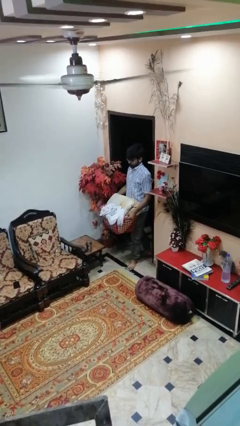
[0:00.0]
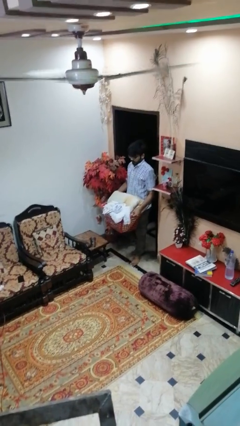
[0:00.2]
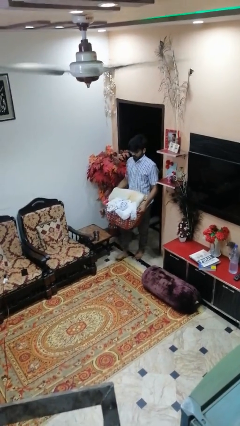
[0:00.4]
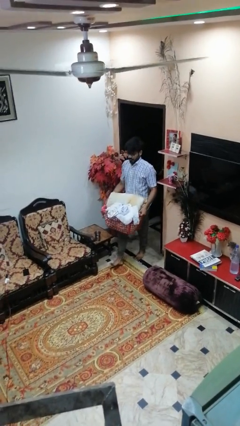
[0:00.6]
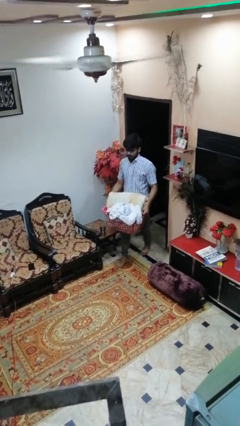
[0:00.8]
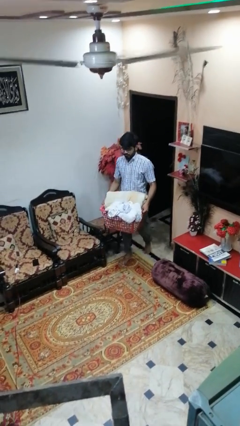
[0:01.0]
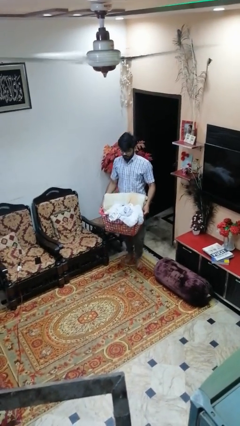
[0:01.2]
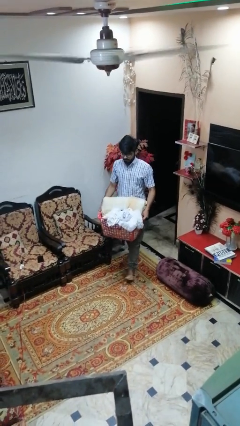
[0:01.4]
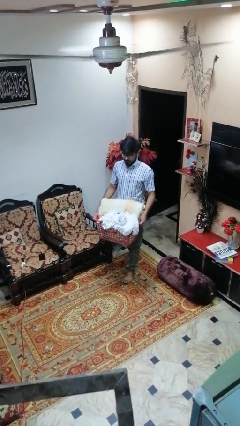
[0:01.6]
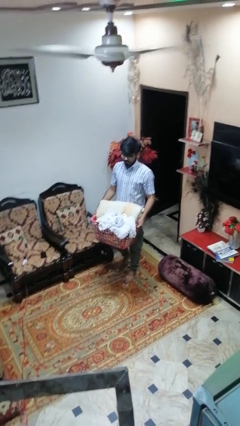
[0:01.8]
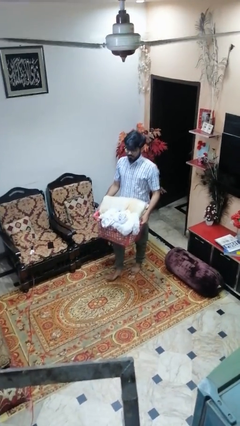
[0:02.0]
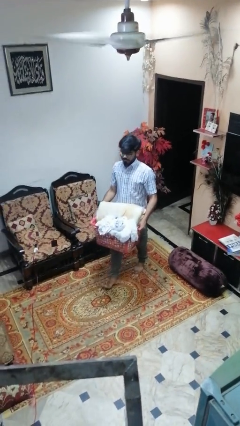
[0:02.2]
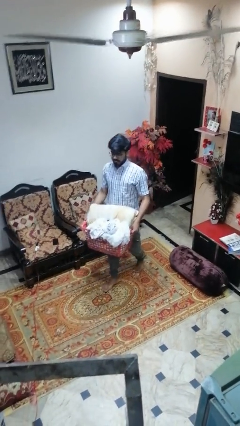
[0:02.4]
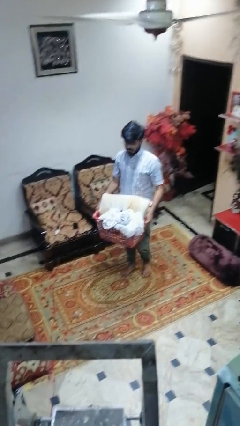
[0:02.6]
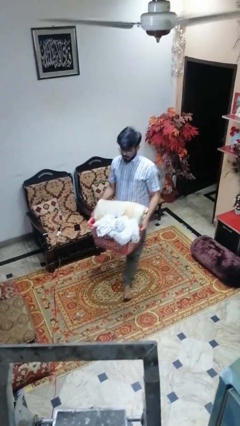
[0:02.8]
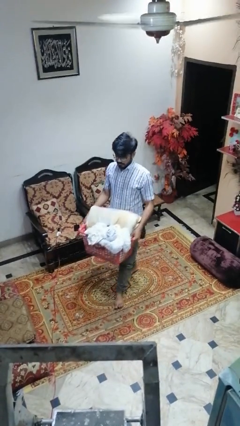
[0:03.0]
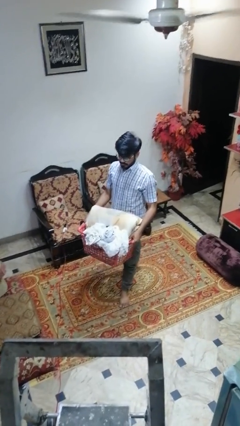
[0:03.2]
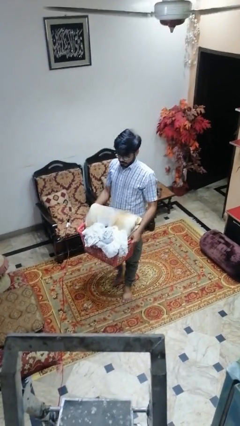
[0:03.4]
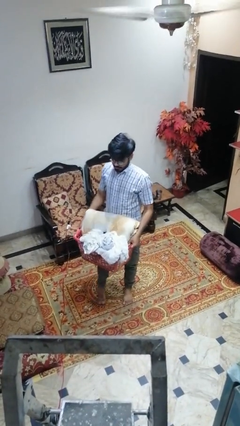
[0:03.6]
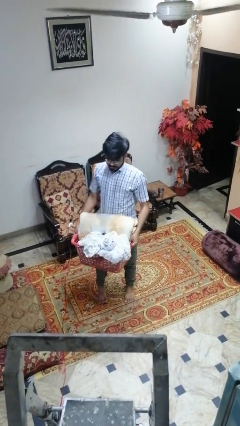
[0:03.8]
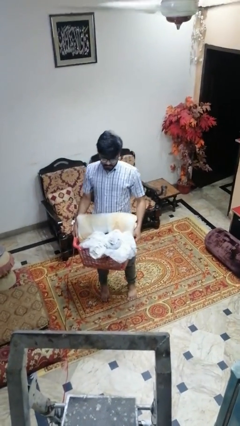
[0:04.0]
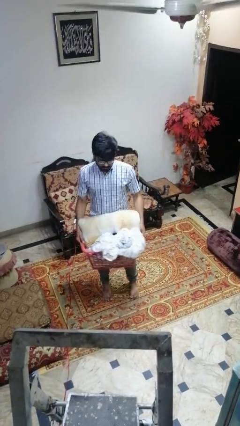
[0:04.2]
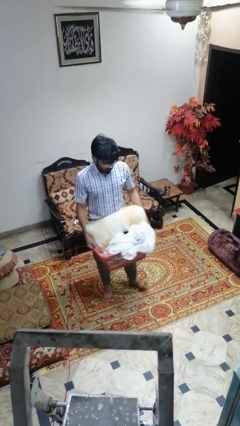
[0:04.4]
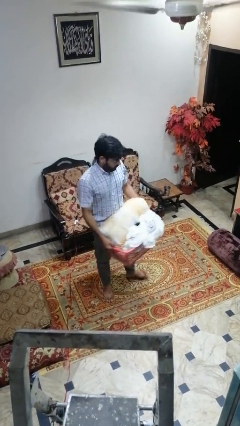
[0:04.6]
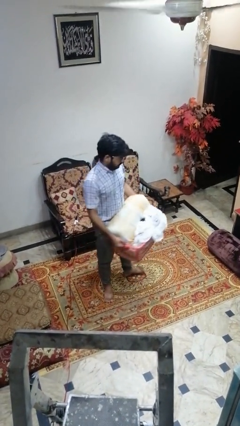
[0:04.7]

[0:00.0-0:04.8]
person carries laundry basket

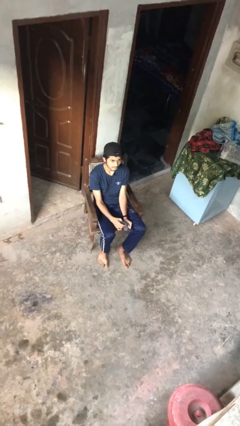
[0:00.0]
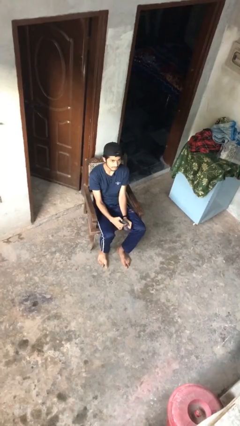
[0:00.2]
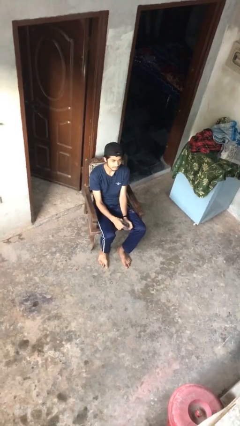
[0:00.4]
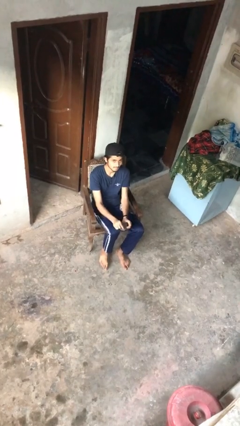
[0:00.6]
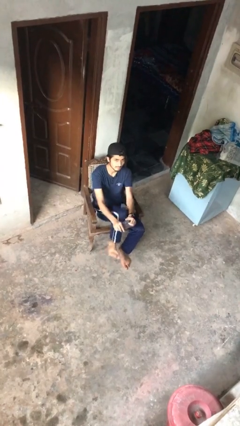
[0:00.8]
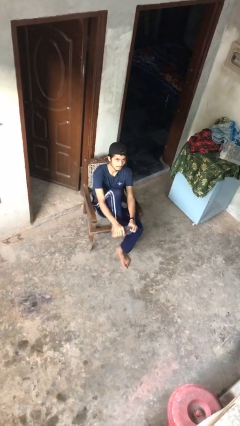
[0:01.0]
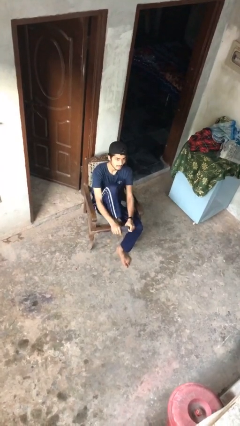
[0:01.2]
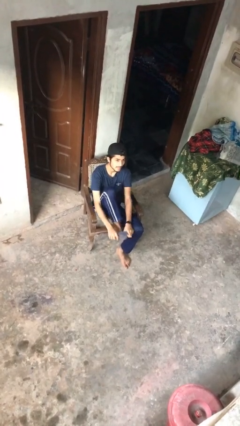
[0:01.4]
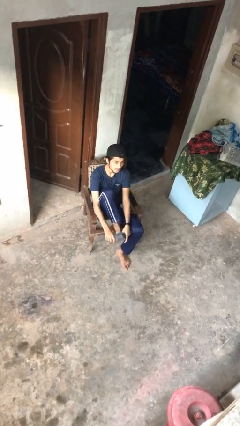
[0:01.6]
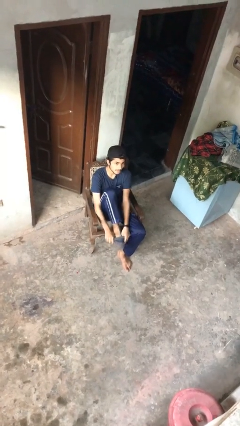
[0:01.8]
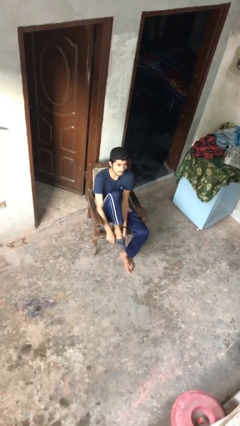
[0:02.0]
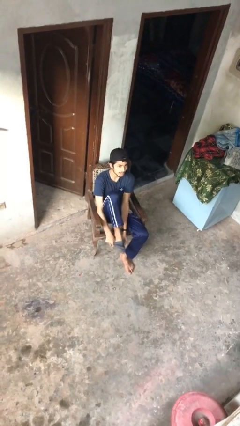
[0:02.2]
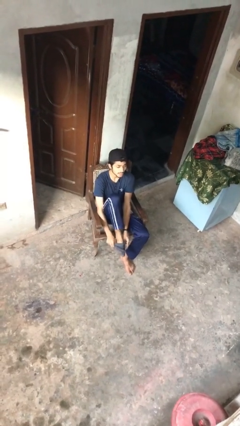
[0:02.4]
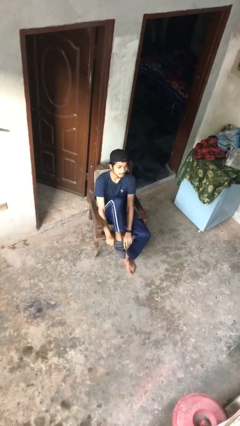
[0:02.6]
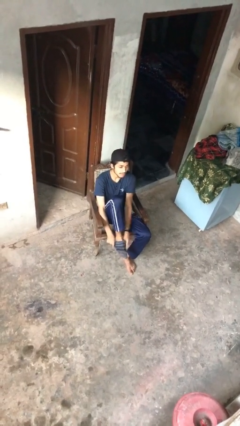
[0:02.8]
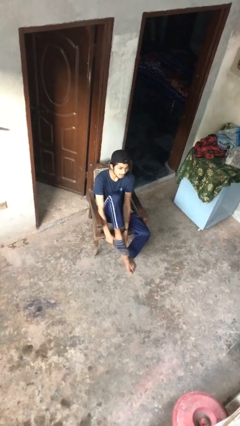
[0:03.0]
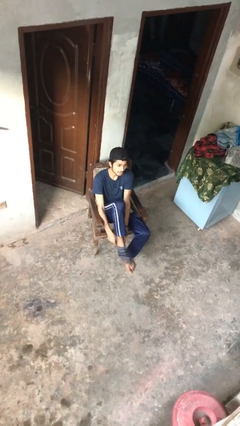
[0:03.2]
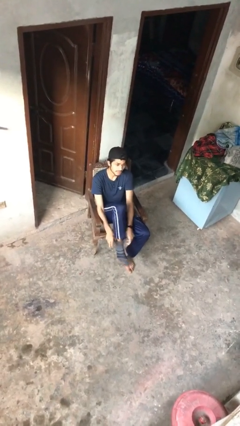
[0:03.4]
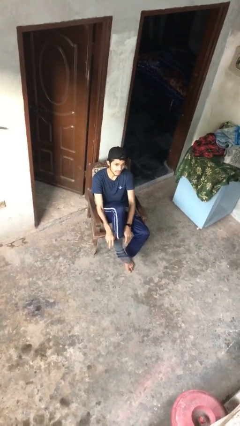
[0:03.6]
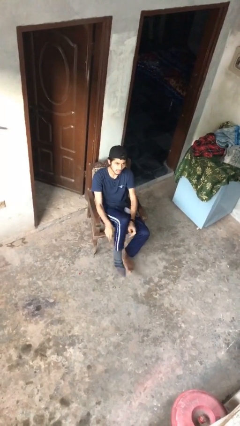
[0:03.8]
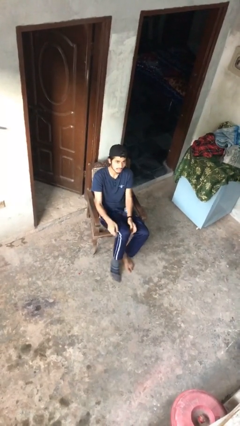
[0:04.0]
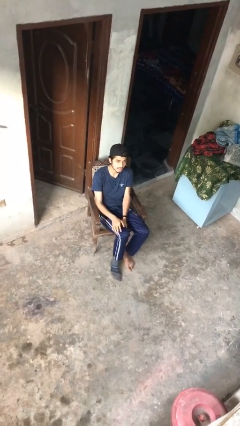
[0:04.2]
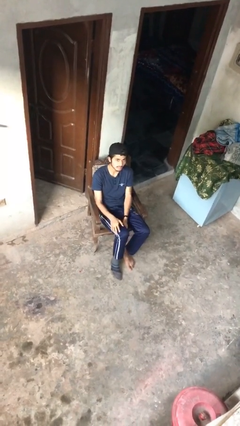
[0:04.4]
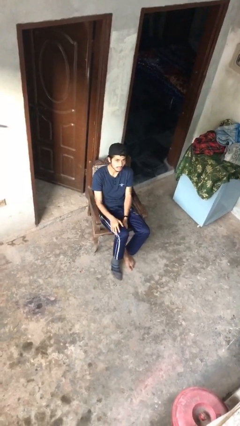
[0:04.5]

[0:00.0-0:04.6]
person puts on socks

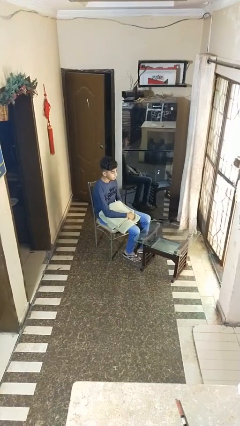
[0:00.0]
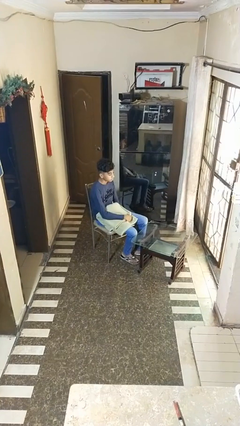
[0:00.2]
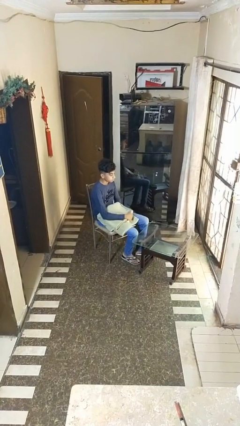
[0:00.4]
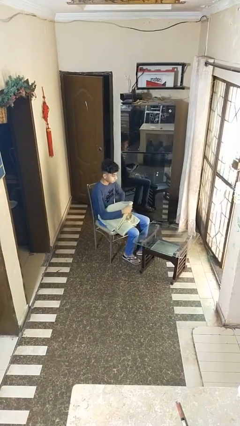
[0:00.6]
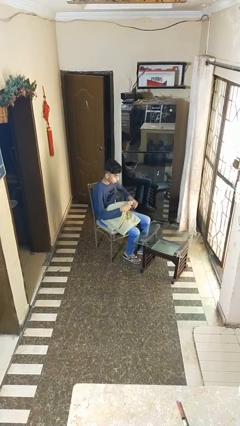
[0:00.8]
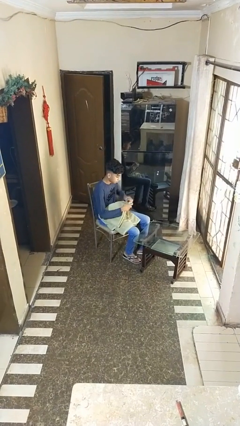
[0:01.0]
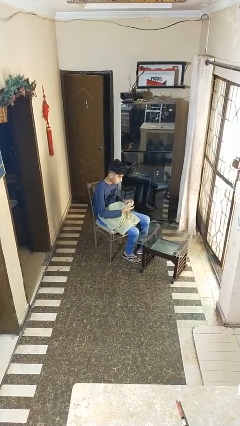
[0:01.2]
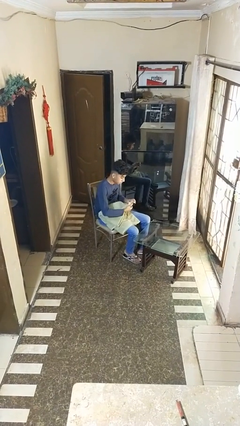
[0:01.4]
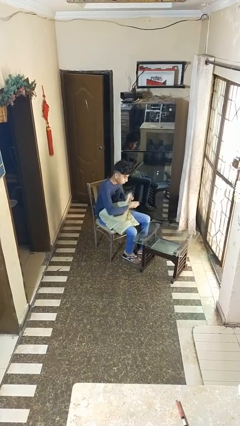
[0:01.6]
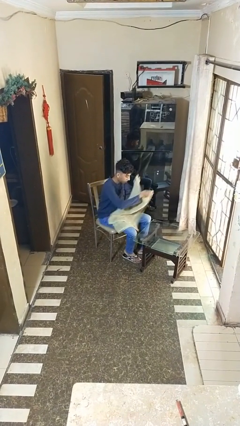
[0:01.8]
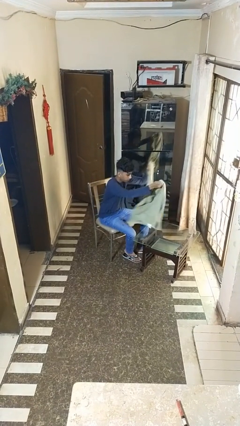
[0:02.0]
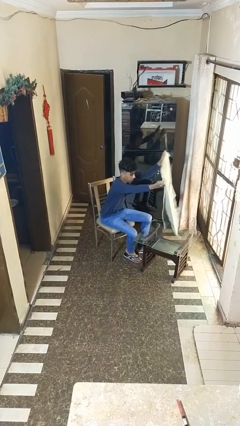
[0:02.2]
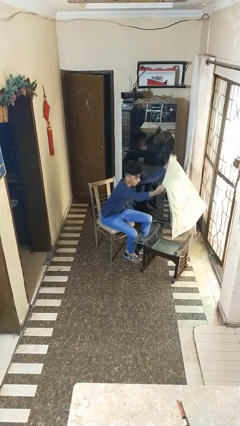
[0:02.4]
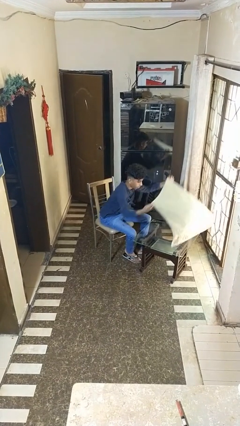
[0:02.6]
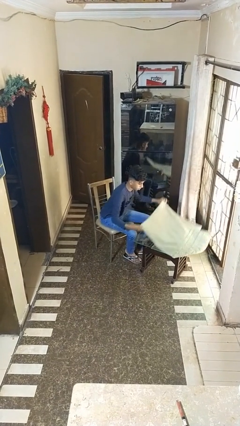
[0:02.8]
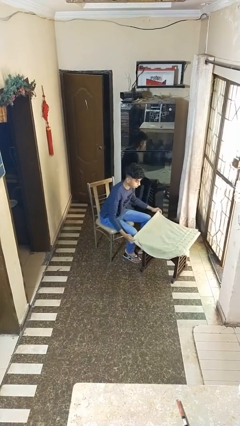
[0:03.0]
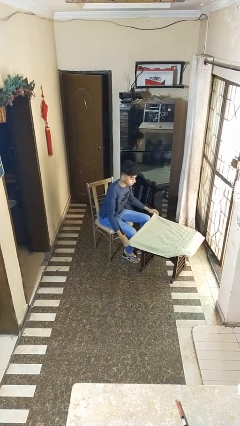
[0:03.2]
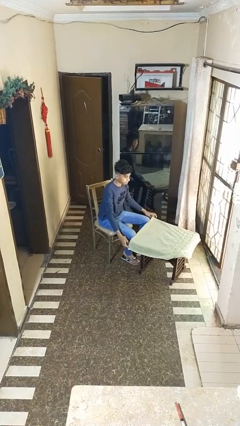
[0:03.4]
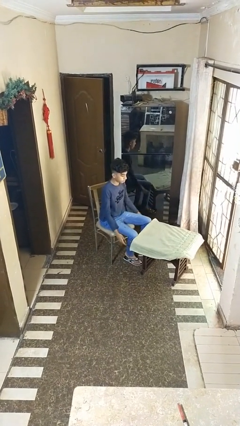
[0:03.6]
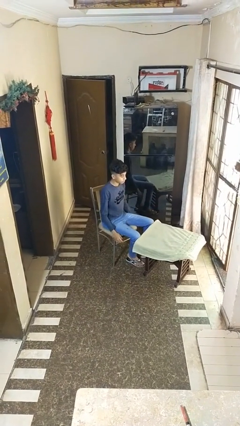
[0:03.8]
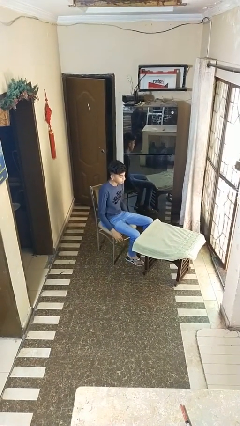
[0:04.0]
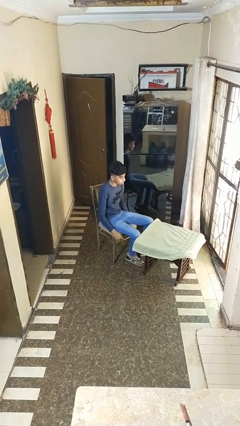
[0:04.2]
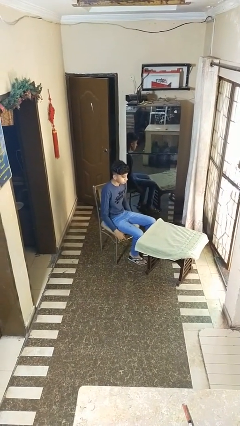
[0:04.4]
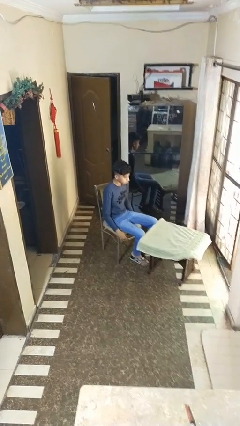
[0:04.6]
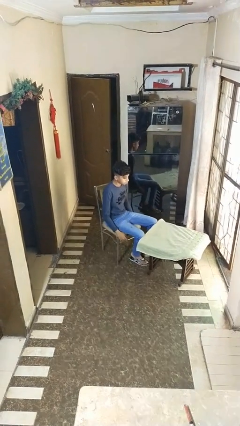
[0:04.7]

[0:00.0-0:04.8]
person spreads tablecloth

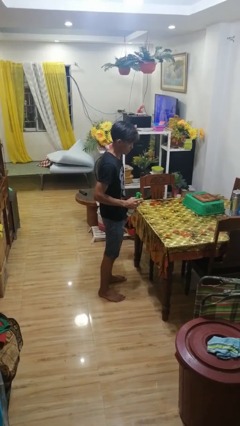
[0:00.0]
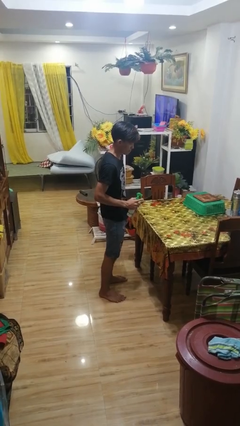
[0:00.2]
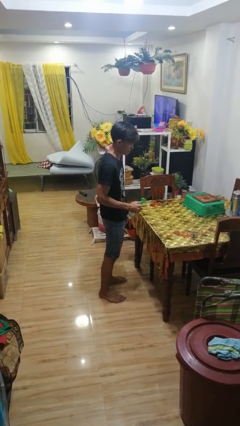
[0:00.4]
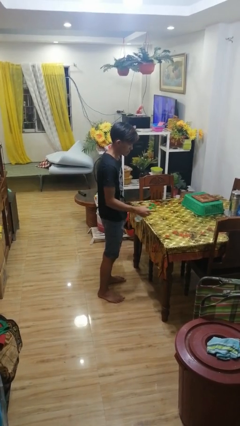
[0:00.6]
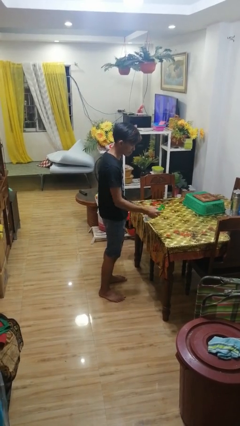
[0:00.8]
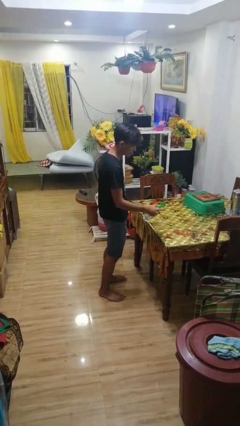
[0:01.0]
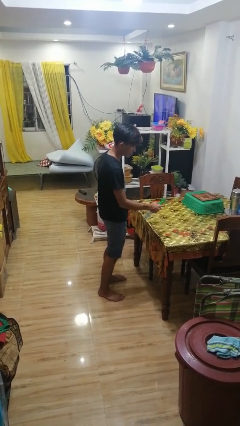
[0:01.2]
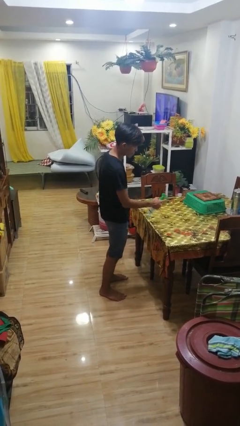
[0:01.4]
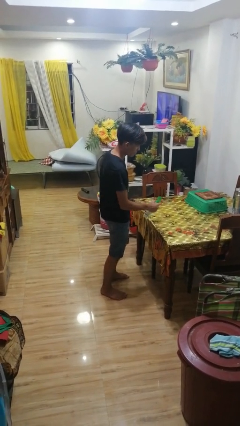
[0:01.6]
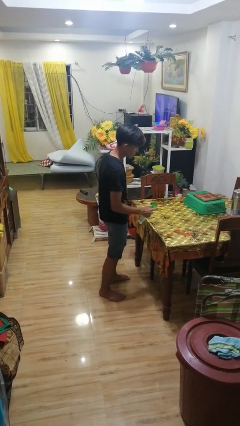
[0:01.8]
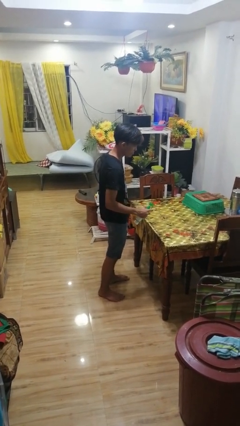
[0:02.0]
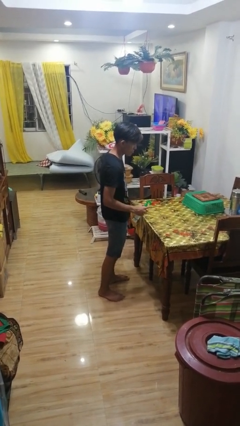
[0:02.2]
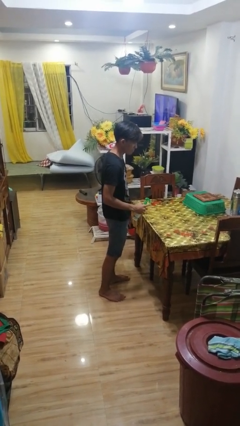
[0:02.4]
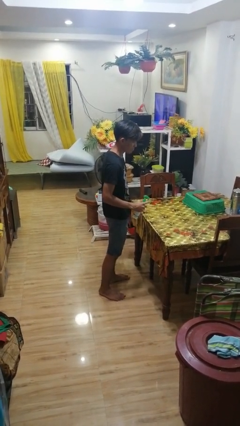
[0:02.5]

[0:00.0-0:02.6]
person sprays from bottle

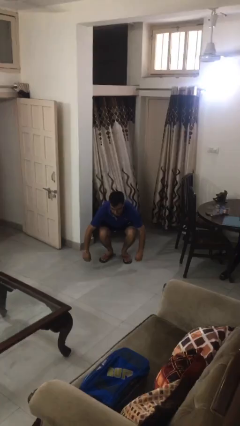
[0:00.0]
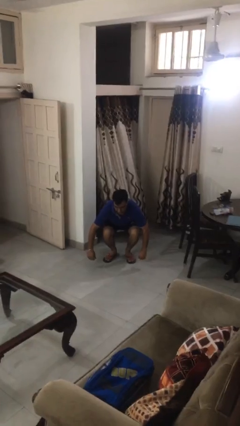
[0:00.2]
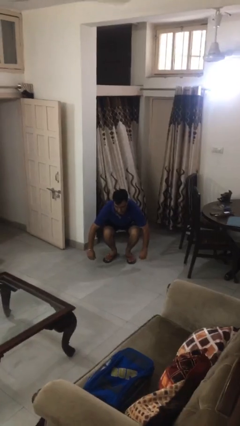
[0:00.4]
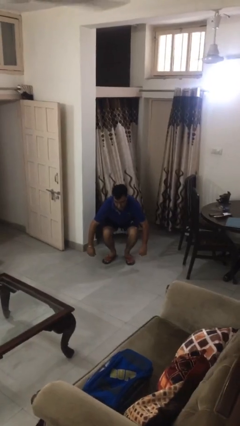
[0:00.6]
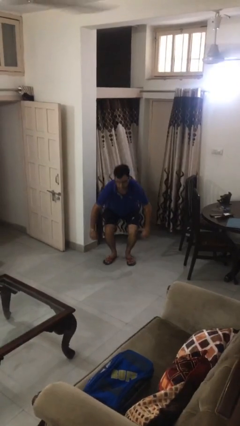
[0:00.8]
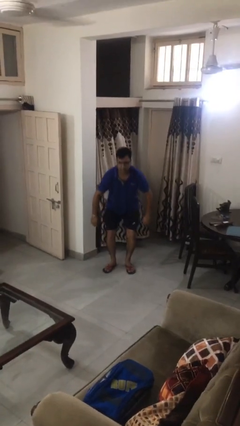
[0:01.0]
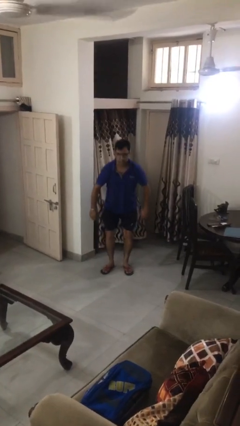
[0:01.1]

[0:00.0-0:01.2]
person stands up
